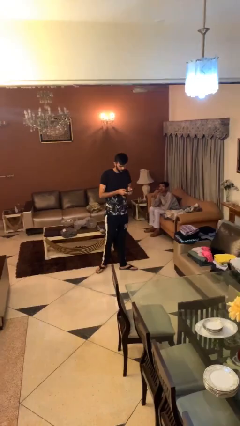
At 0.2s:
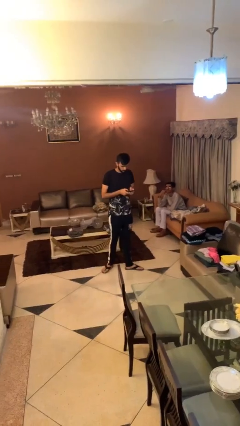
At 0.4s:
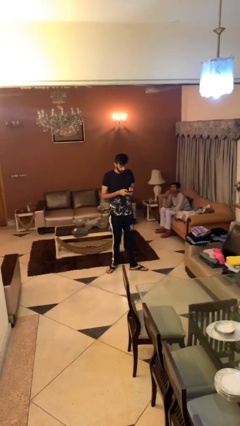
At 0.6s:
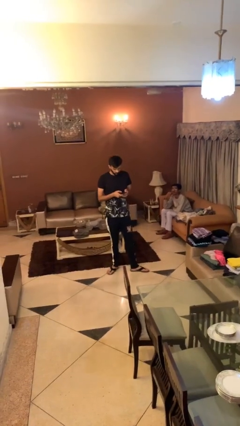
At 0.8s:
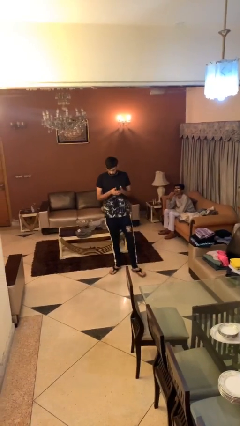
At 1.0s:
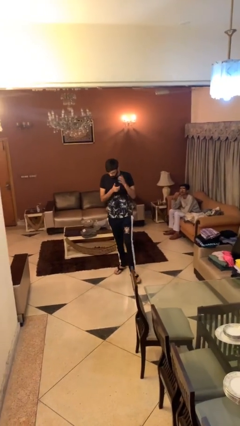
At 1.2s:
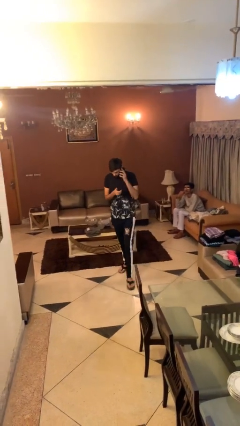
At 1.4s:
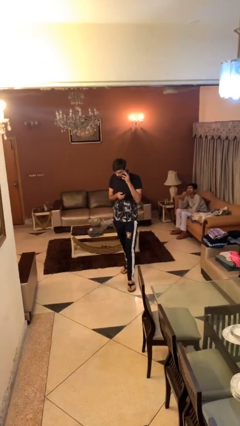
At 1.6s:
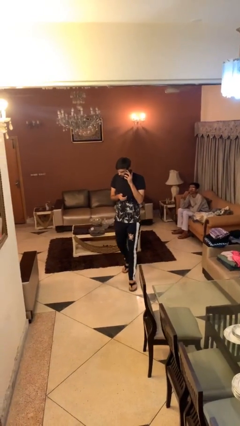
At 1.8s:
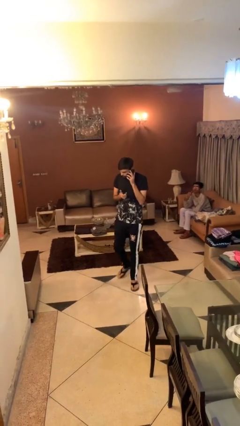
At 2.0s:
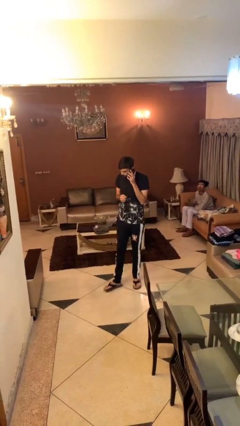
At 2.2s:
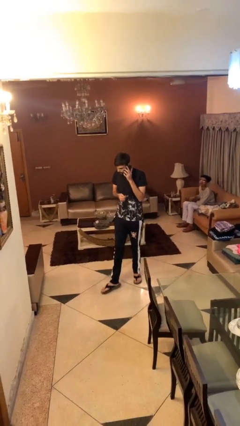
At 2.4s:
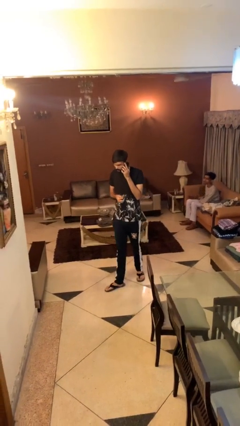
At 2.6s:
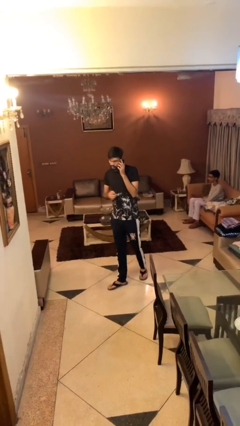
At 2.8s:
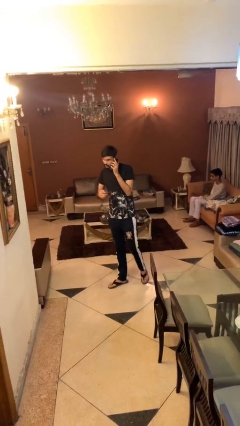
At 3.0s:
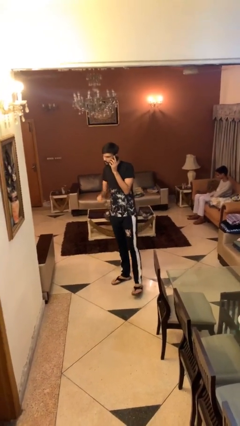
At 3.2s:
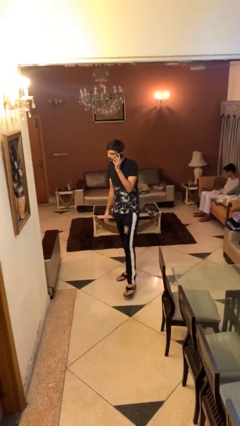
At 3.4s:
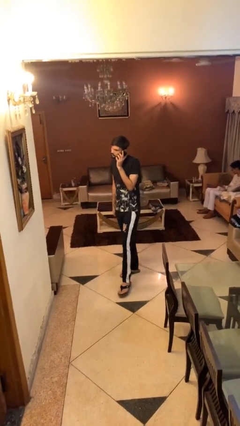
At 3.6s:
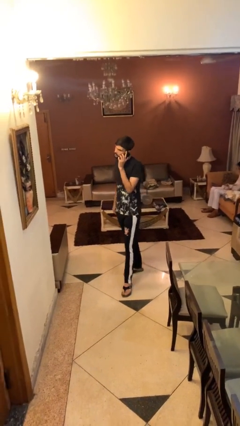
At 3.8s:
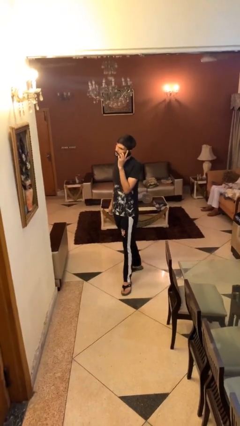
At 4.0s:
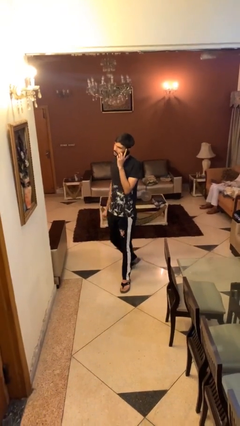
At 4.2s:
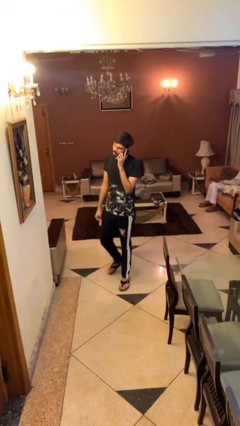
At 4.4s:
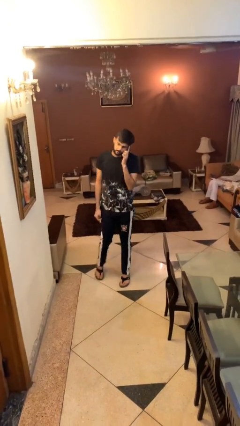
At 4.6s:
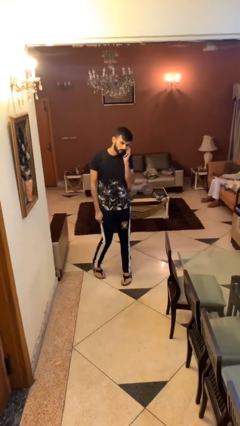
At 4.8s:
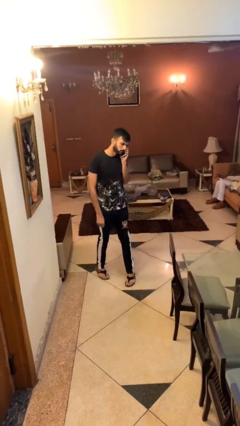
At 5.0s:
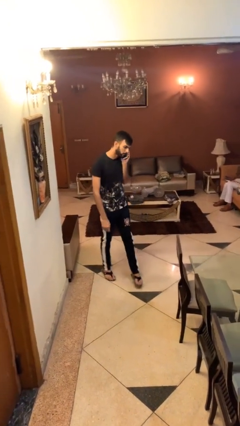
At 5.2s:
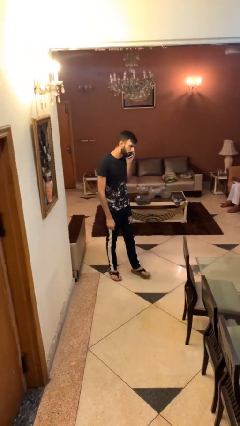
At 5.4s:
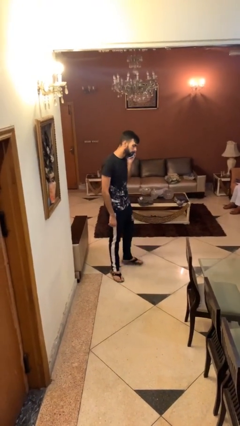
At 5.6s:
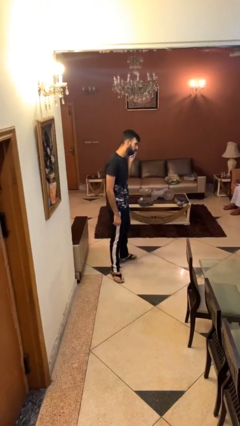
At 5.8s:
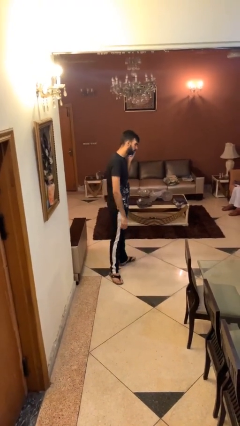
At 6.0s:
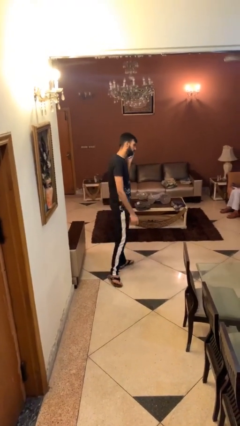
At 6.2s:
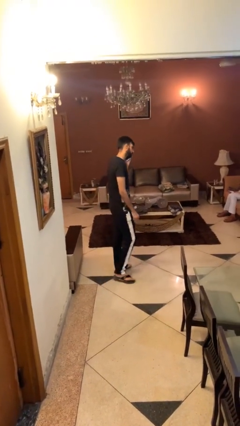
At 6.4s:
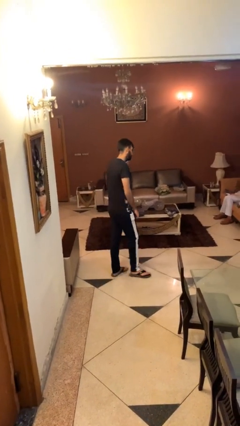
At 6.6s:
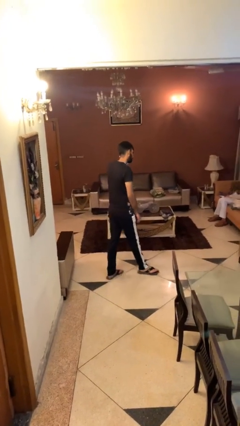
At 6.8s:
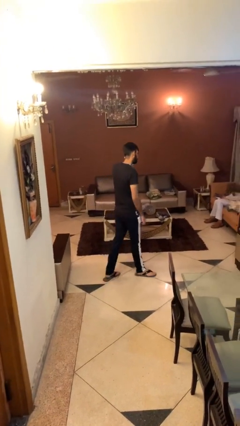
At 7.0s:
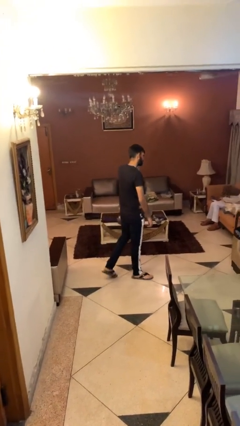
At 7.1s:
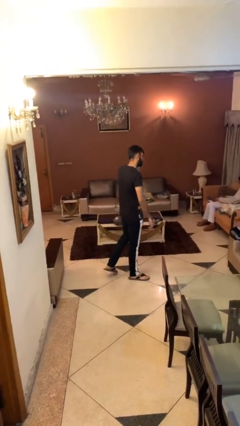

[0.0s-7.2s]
person talks on phone

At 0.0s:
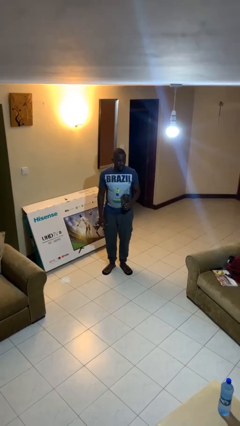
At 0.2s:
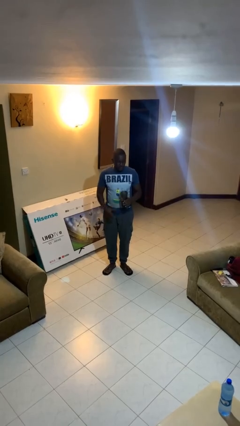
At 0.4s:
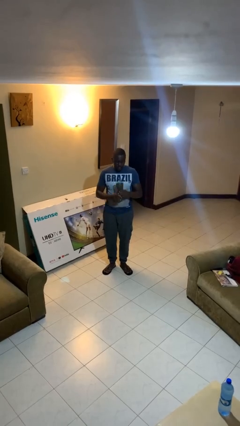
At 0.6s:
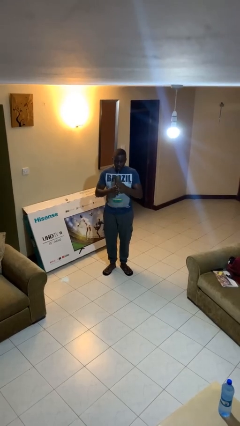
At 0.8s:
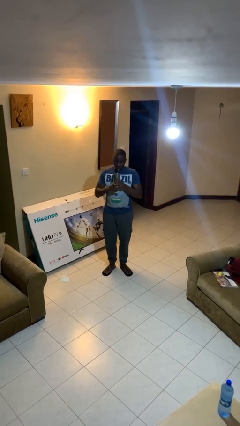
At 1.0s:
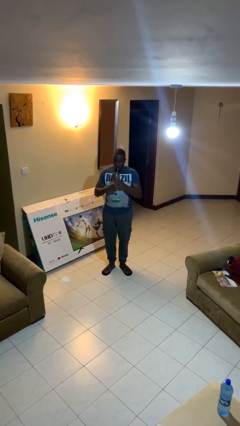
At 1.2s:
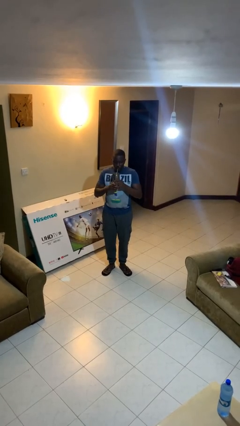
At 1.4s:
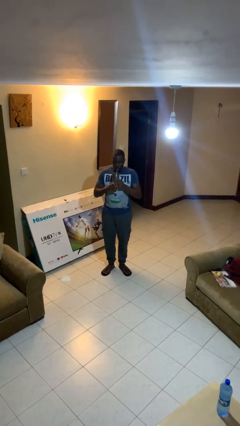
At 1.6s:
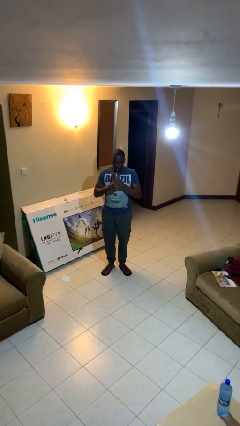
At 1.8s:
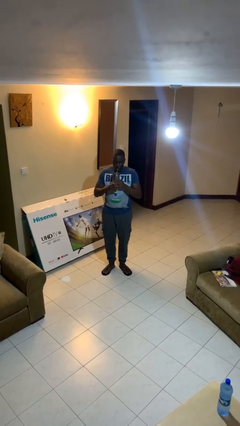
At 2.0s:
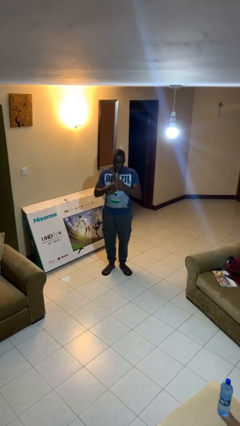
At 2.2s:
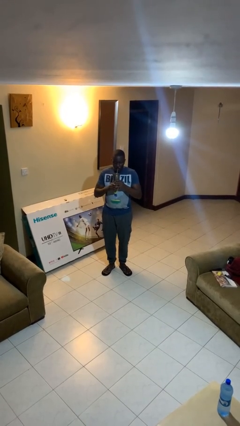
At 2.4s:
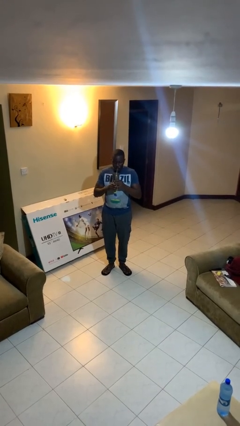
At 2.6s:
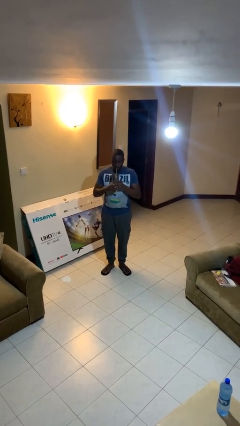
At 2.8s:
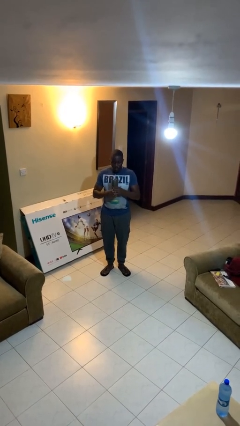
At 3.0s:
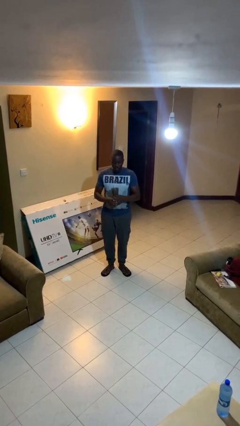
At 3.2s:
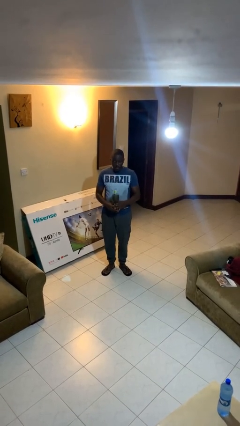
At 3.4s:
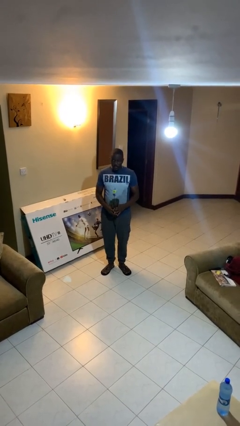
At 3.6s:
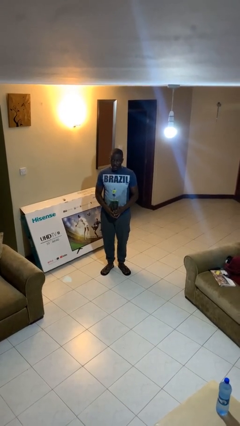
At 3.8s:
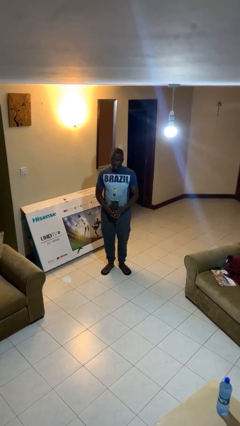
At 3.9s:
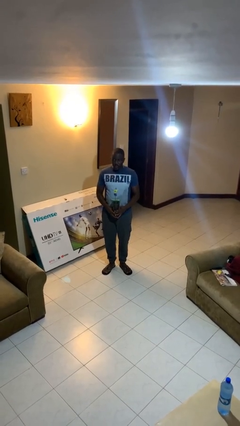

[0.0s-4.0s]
person drinks from straw

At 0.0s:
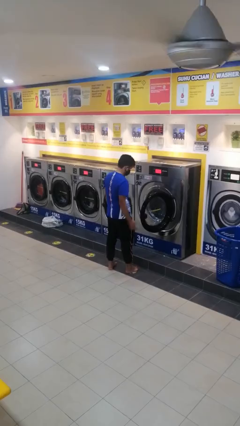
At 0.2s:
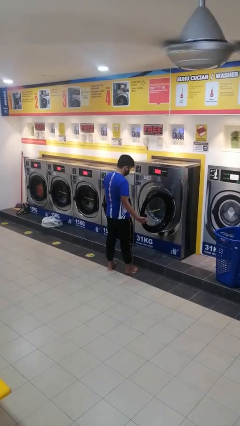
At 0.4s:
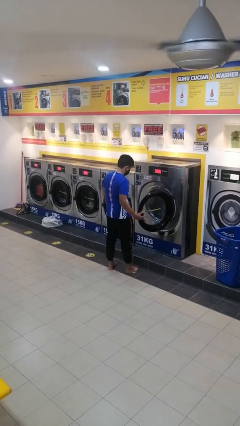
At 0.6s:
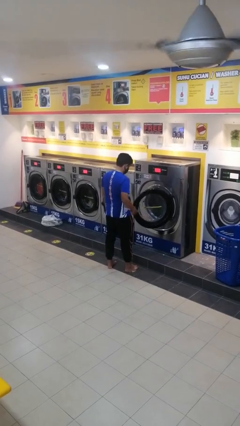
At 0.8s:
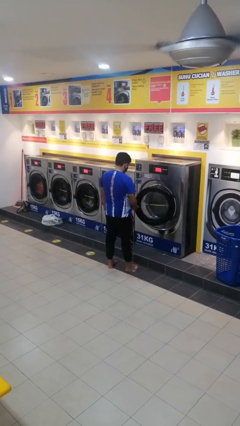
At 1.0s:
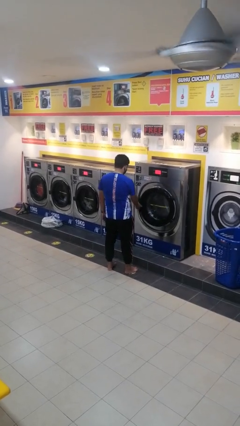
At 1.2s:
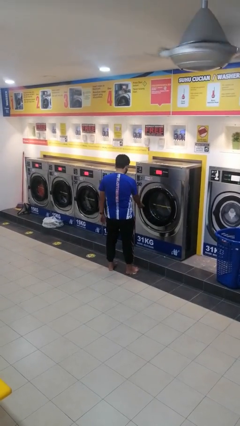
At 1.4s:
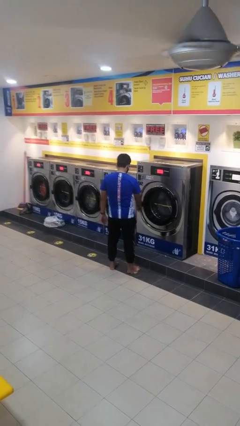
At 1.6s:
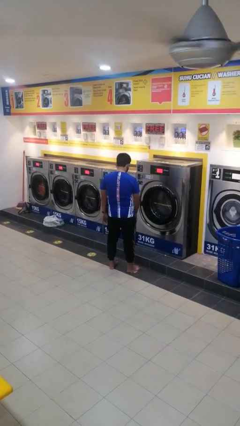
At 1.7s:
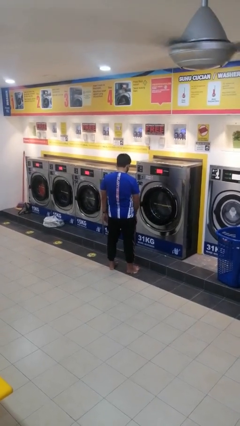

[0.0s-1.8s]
person closes clothes washer

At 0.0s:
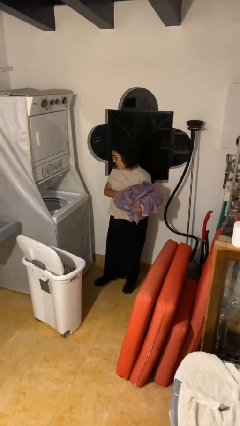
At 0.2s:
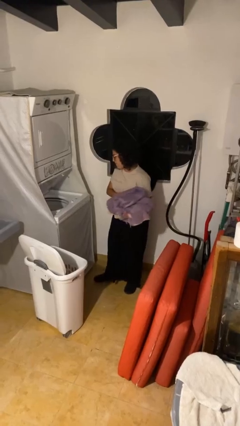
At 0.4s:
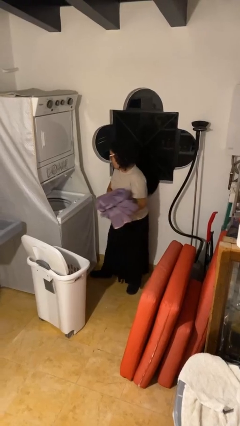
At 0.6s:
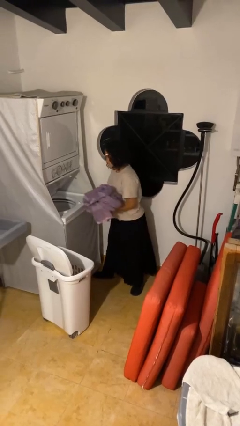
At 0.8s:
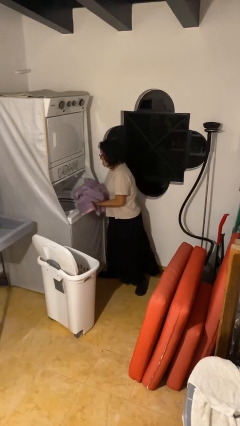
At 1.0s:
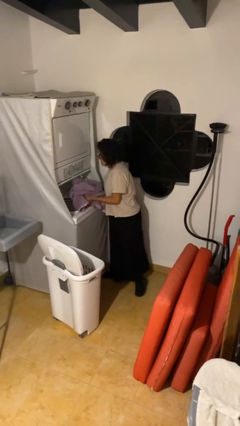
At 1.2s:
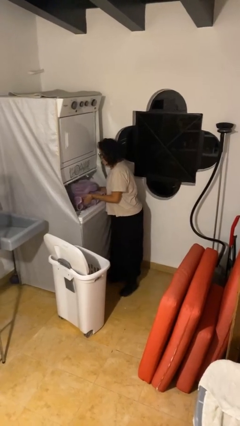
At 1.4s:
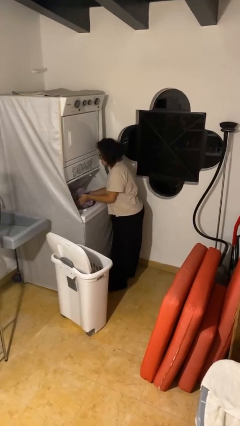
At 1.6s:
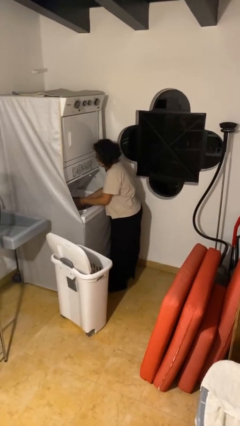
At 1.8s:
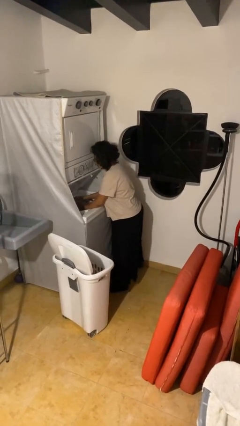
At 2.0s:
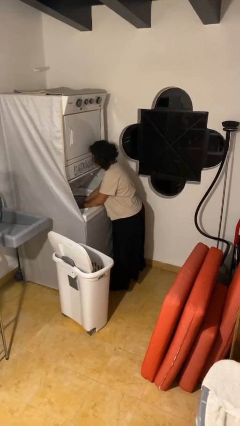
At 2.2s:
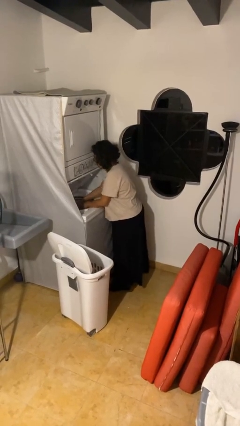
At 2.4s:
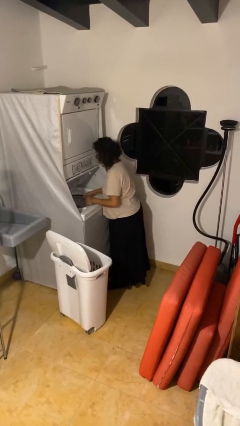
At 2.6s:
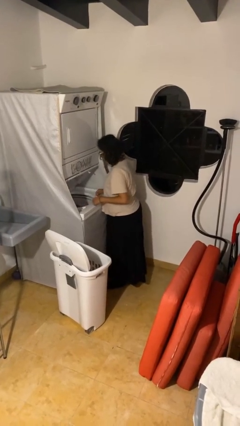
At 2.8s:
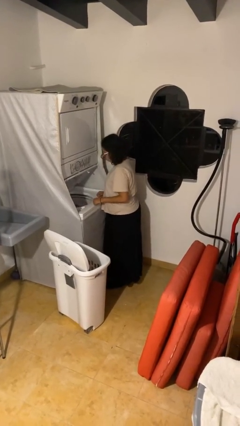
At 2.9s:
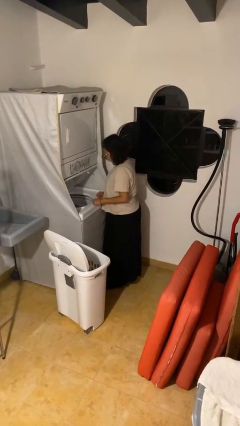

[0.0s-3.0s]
person loads clotheswasher

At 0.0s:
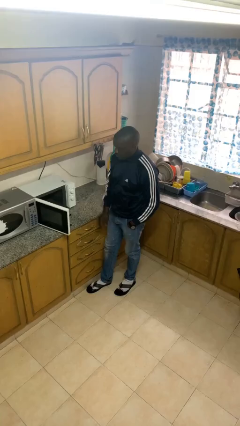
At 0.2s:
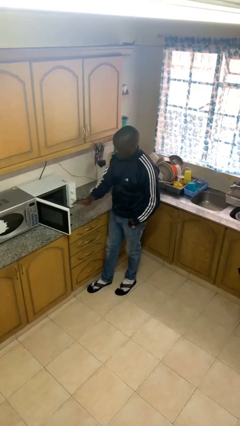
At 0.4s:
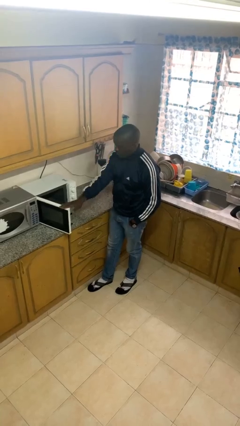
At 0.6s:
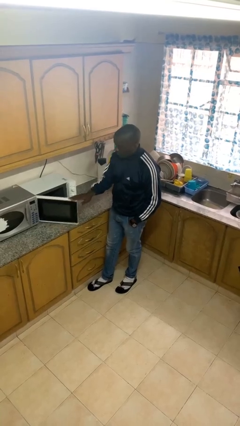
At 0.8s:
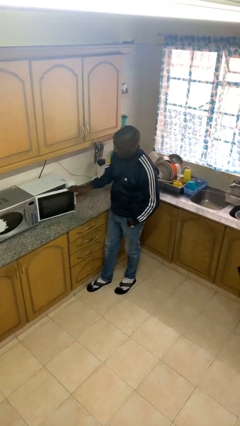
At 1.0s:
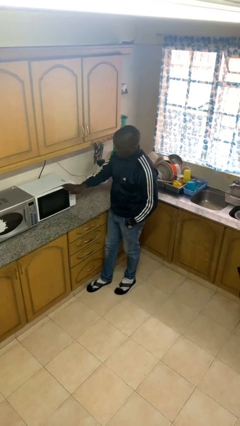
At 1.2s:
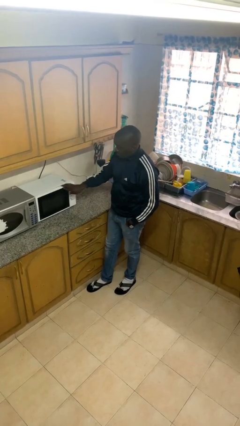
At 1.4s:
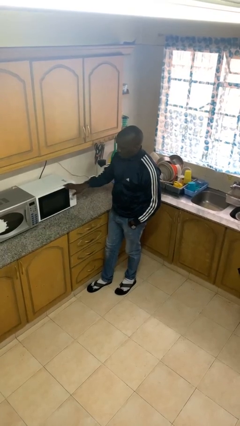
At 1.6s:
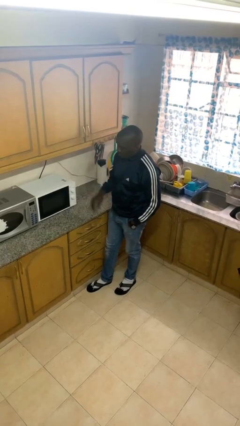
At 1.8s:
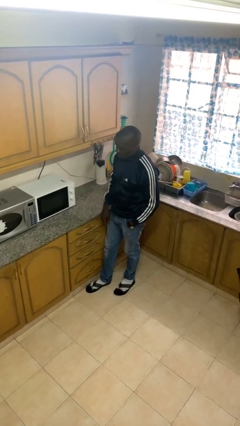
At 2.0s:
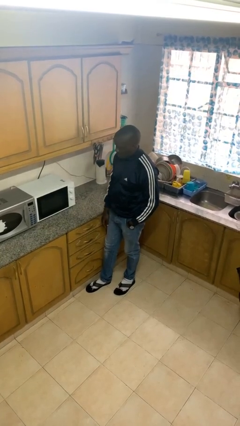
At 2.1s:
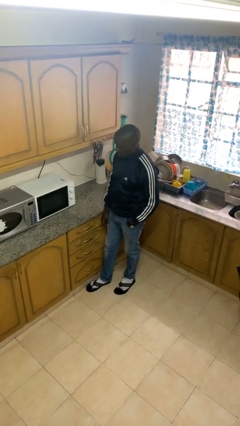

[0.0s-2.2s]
person closes microwave
